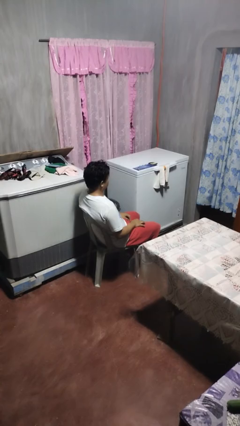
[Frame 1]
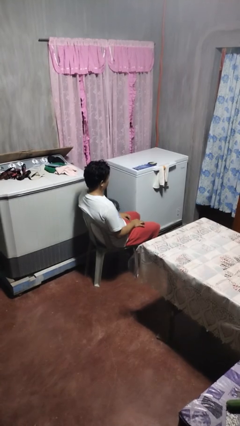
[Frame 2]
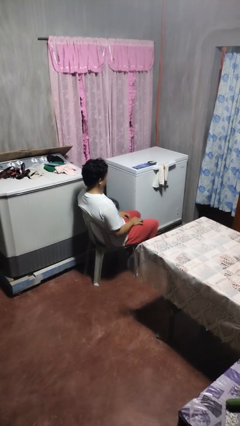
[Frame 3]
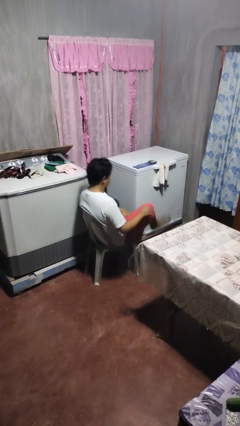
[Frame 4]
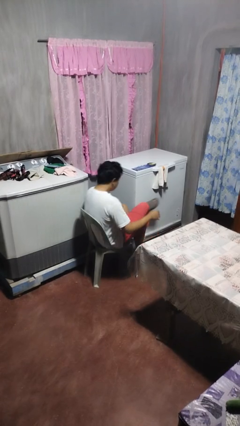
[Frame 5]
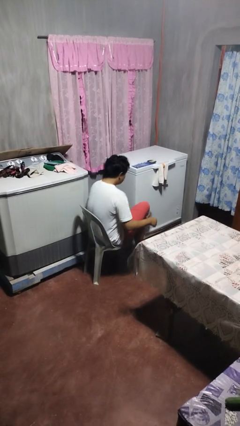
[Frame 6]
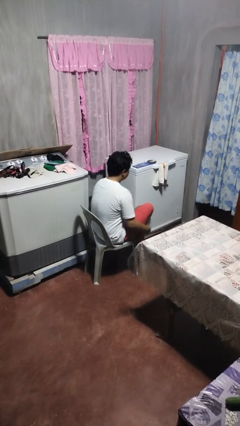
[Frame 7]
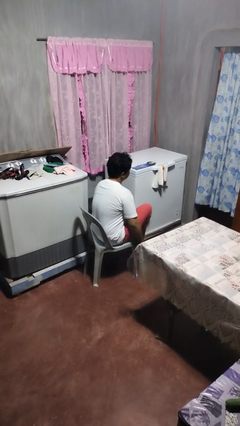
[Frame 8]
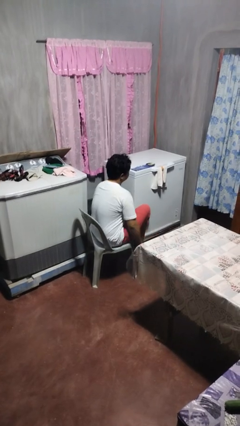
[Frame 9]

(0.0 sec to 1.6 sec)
person crosses legs

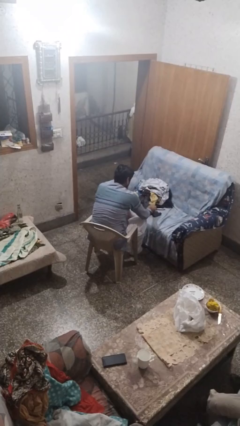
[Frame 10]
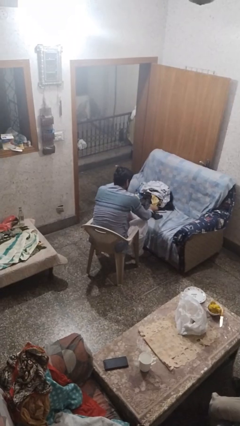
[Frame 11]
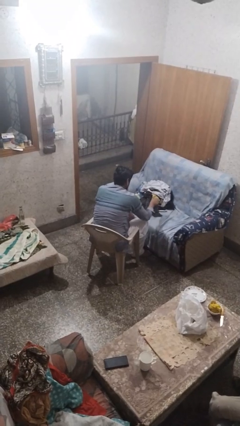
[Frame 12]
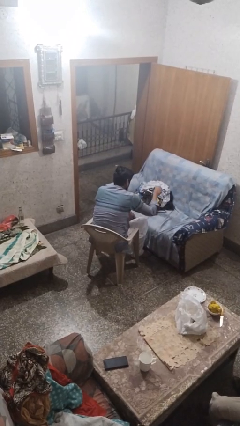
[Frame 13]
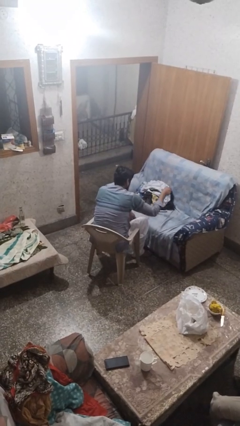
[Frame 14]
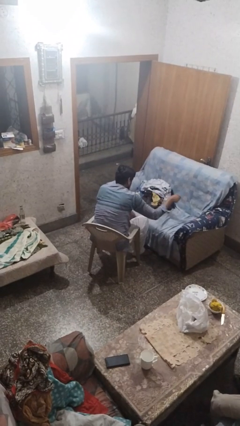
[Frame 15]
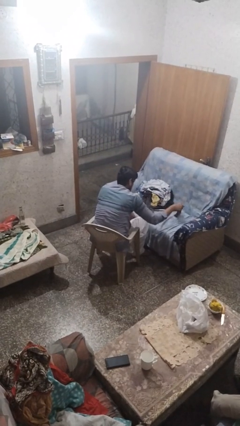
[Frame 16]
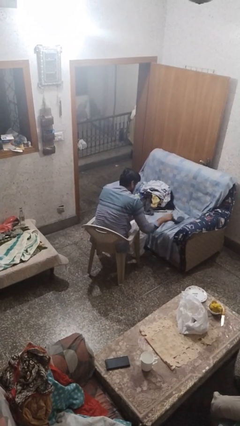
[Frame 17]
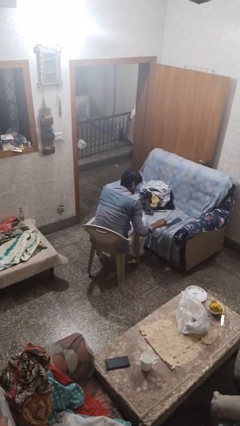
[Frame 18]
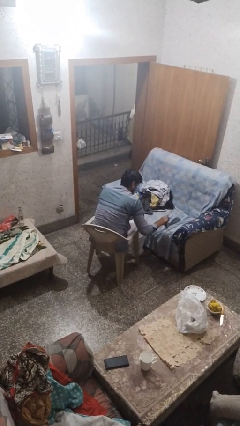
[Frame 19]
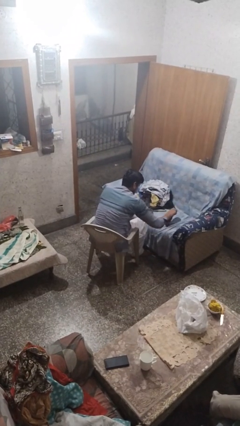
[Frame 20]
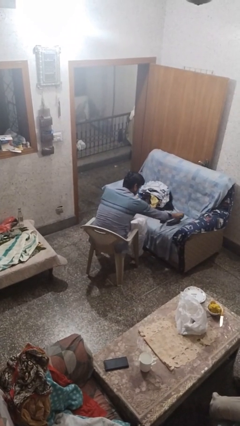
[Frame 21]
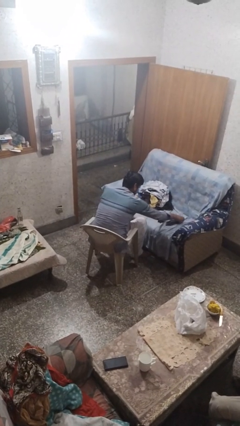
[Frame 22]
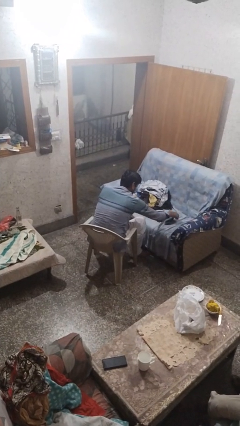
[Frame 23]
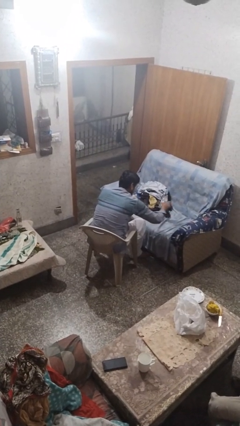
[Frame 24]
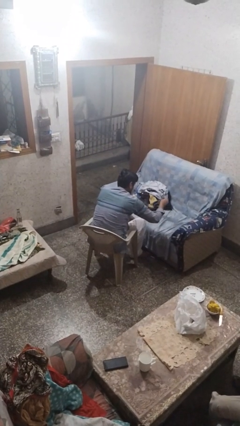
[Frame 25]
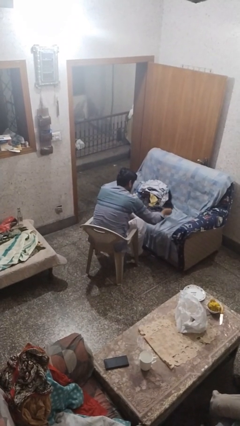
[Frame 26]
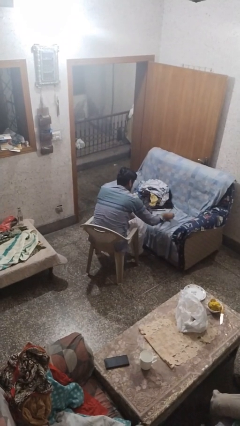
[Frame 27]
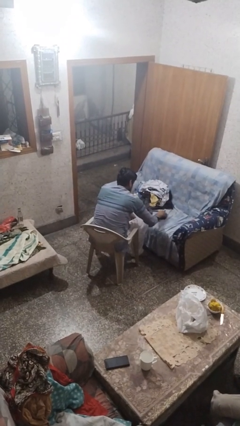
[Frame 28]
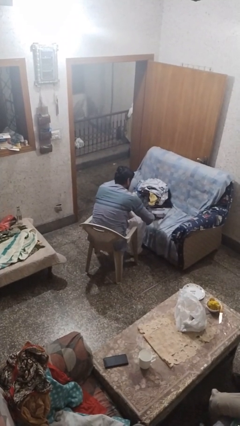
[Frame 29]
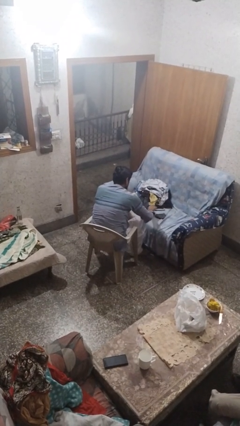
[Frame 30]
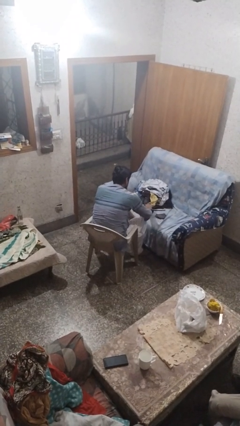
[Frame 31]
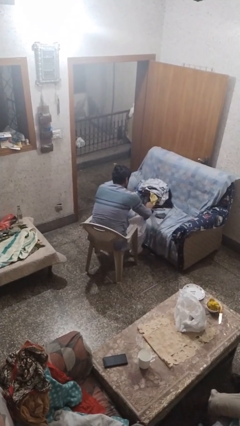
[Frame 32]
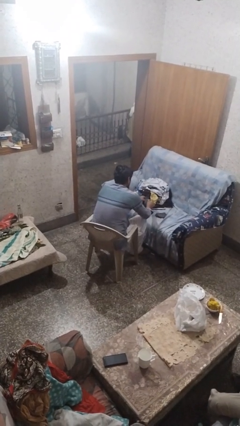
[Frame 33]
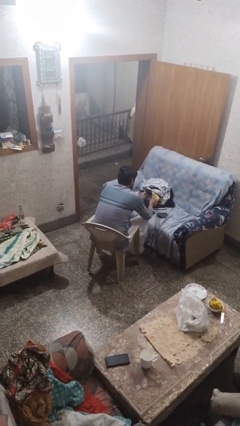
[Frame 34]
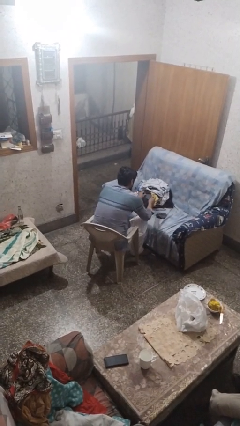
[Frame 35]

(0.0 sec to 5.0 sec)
person folds socks

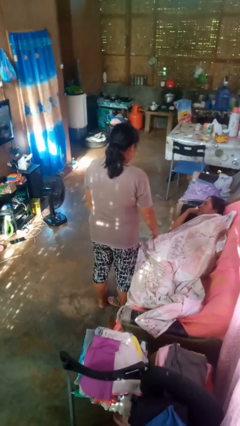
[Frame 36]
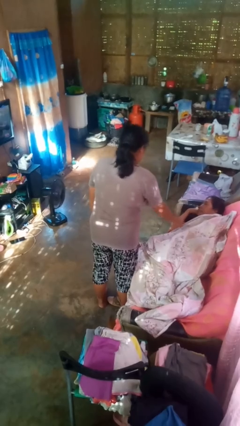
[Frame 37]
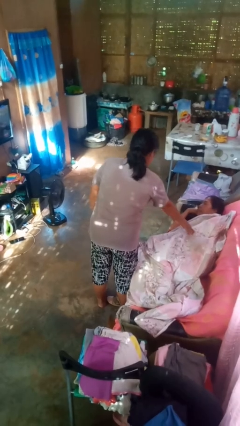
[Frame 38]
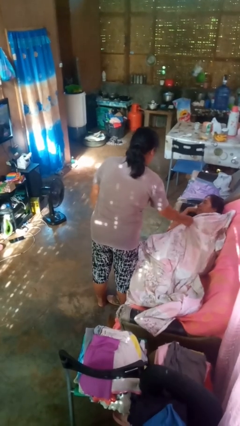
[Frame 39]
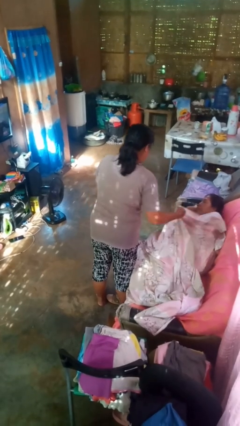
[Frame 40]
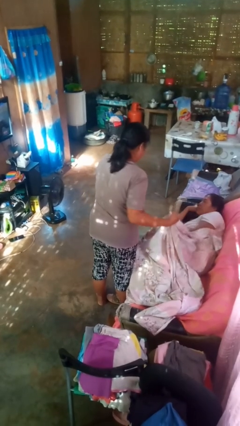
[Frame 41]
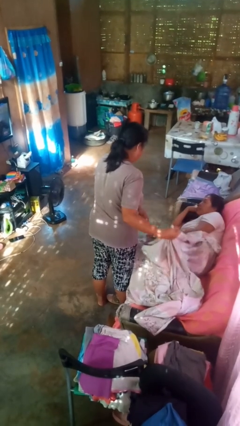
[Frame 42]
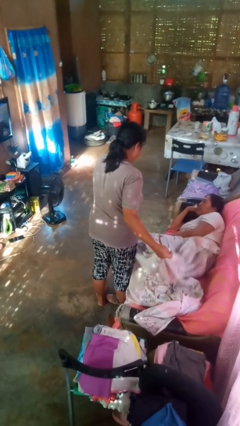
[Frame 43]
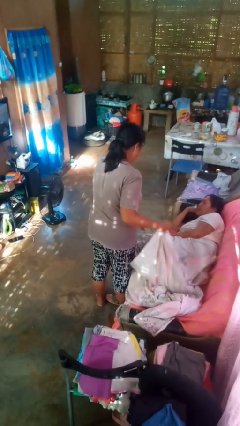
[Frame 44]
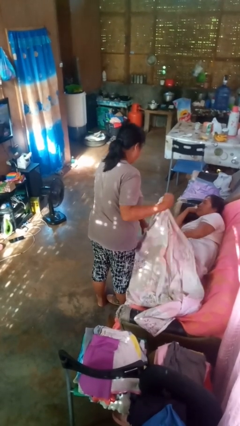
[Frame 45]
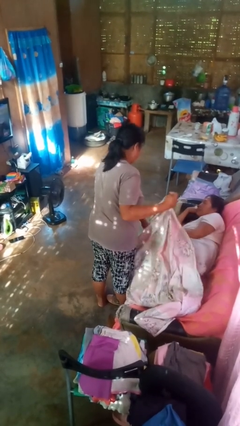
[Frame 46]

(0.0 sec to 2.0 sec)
person uncovers friend with blanket

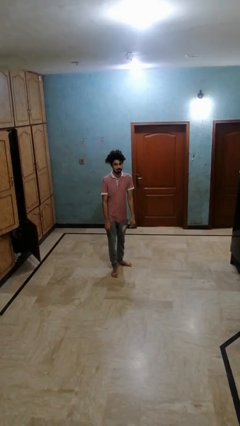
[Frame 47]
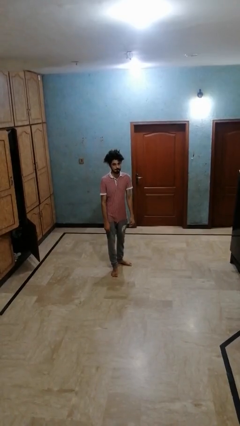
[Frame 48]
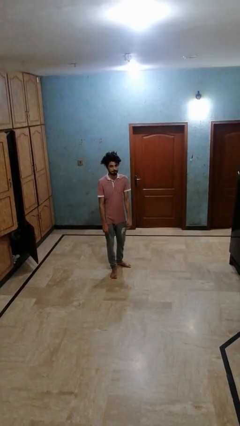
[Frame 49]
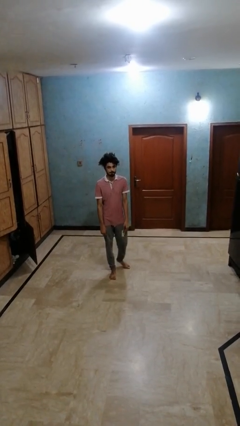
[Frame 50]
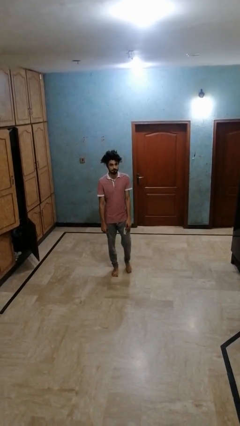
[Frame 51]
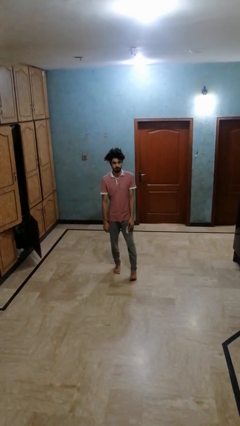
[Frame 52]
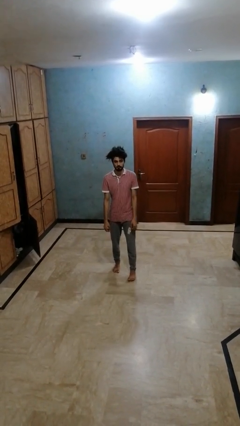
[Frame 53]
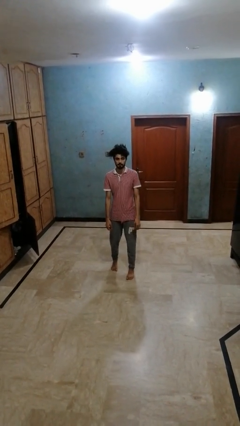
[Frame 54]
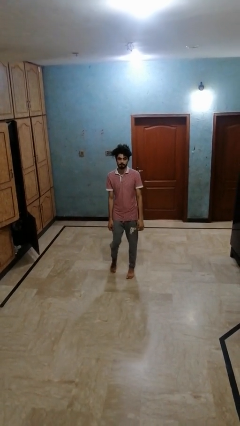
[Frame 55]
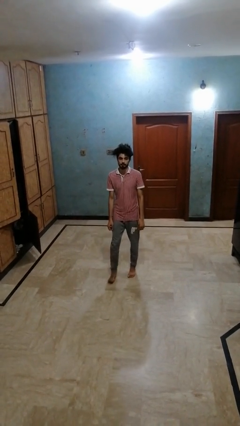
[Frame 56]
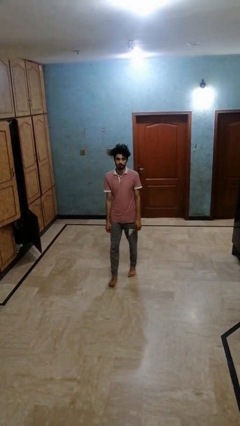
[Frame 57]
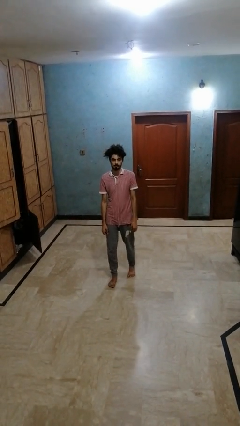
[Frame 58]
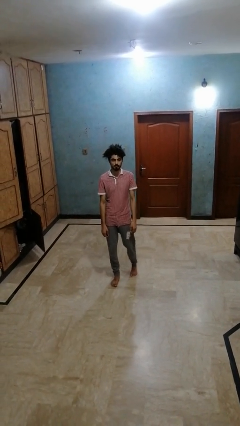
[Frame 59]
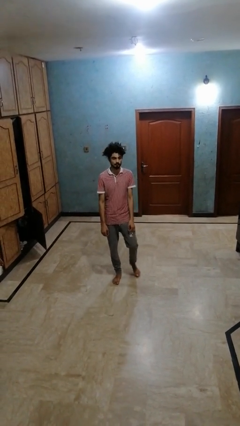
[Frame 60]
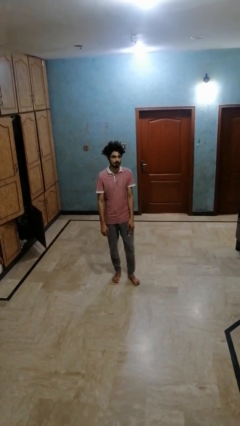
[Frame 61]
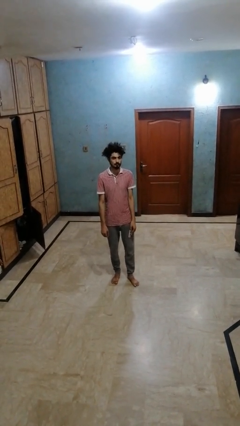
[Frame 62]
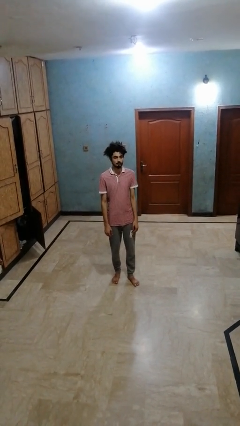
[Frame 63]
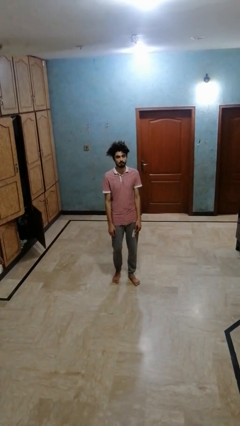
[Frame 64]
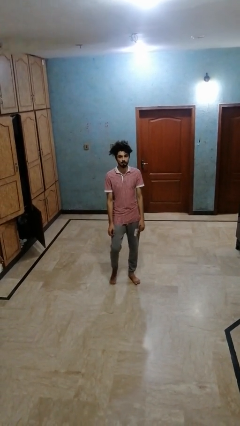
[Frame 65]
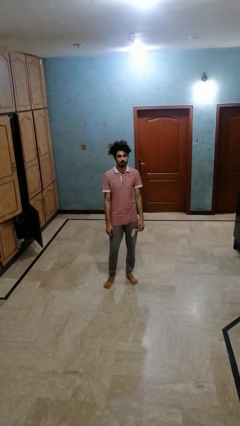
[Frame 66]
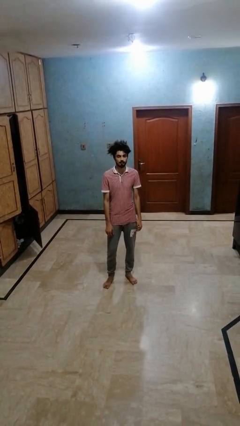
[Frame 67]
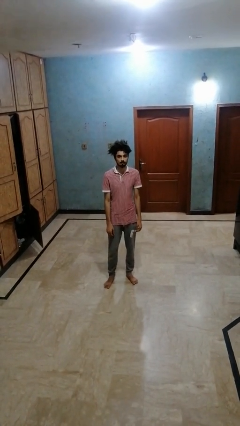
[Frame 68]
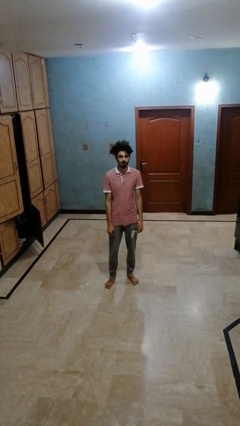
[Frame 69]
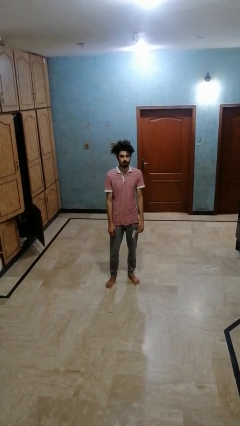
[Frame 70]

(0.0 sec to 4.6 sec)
person twirls

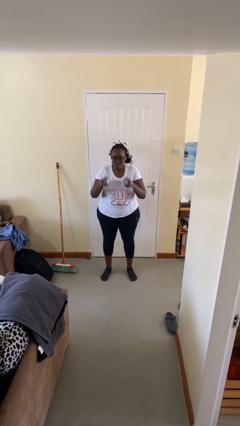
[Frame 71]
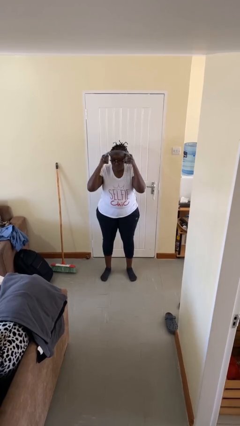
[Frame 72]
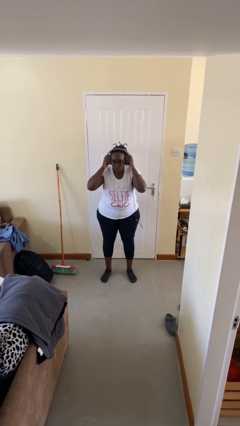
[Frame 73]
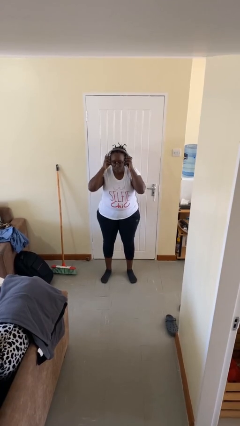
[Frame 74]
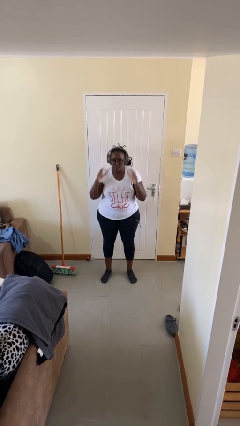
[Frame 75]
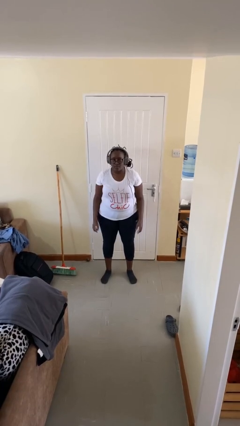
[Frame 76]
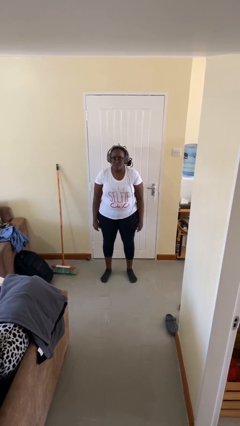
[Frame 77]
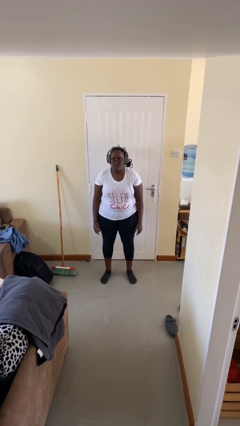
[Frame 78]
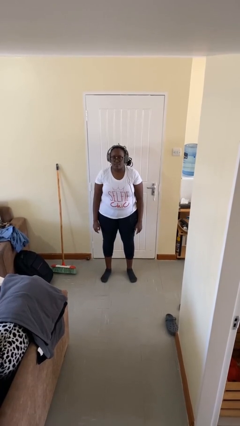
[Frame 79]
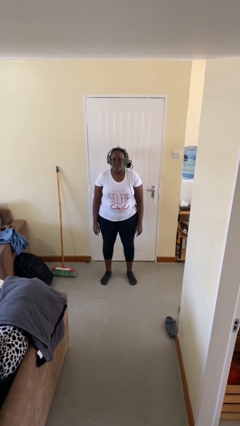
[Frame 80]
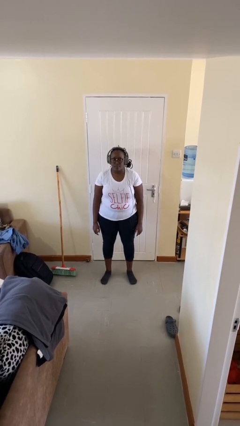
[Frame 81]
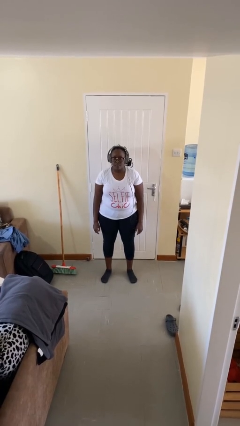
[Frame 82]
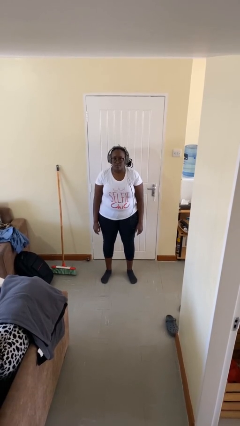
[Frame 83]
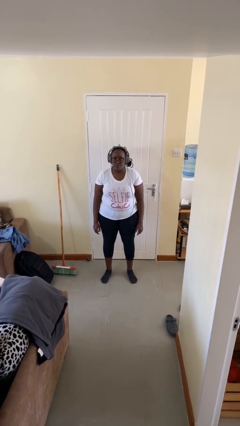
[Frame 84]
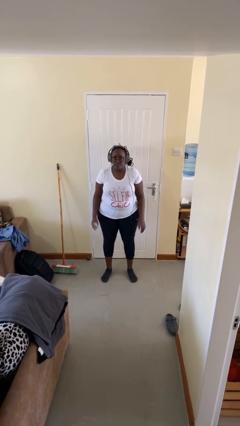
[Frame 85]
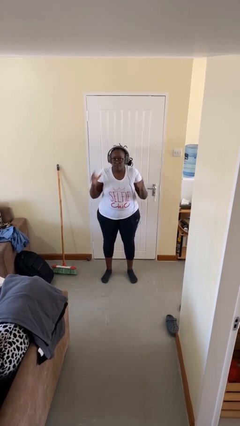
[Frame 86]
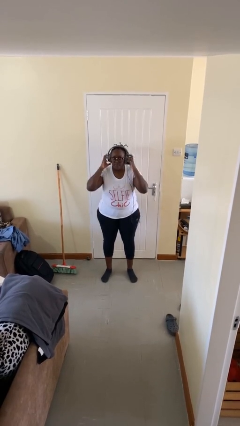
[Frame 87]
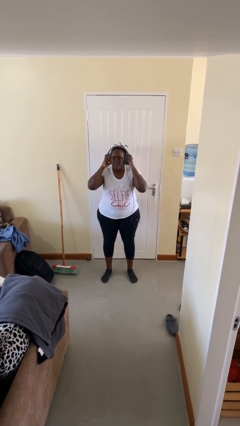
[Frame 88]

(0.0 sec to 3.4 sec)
person puts on headphones

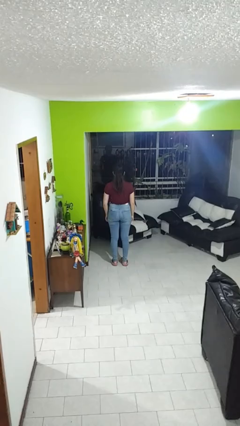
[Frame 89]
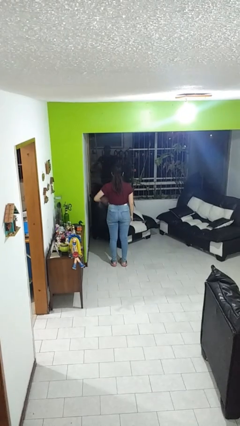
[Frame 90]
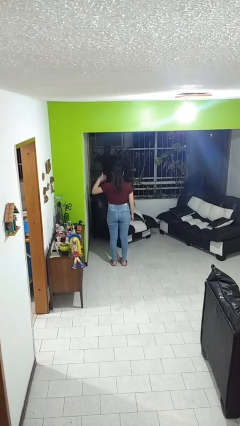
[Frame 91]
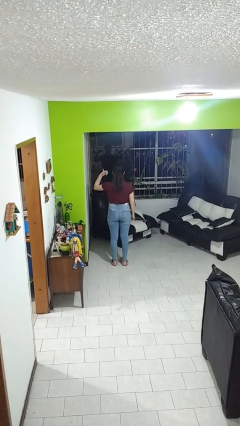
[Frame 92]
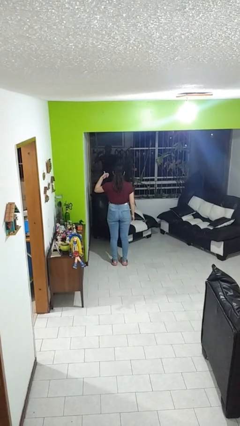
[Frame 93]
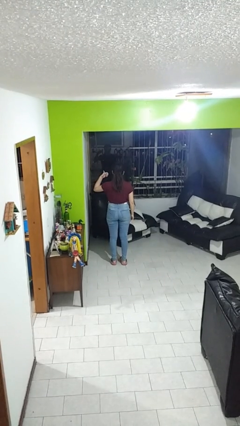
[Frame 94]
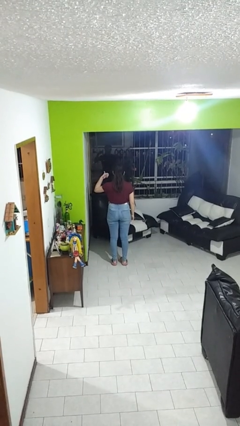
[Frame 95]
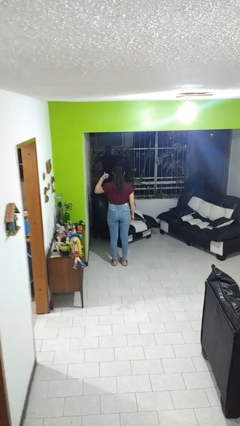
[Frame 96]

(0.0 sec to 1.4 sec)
person gestures thumbs up
